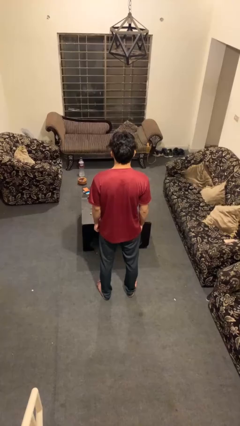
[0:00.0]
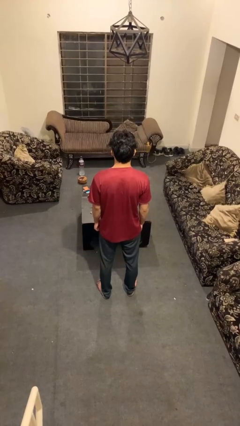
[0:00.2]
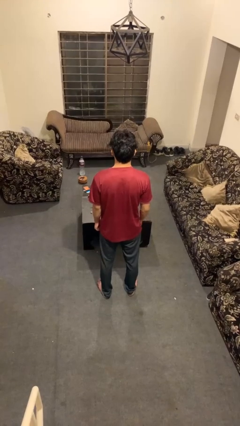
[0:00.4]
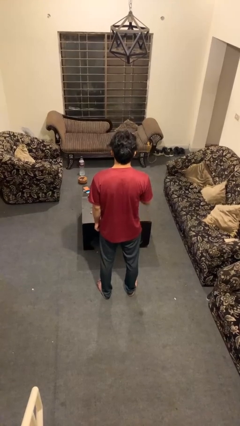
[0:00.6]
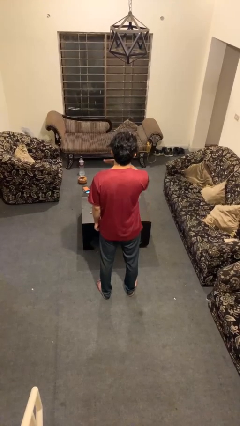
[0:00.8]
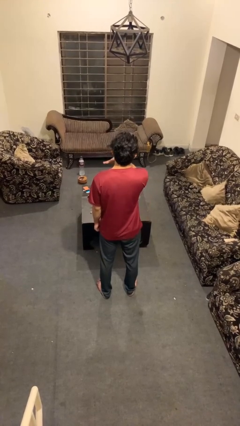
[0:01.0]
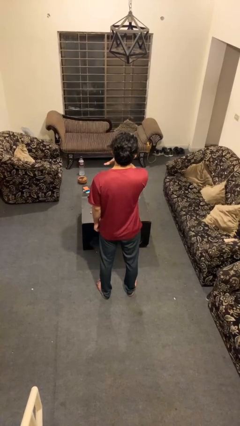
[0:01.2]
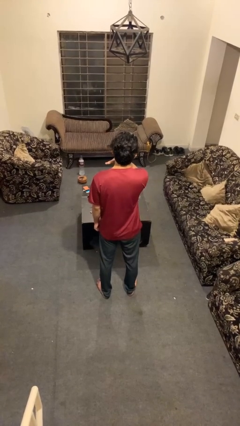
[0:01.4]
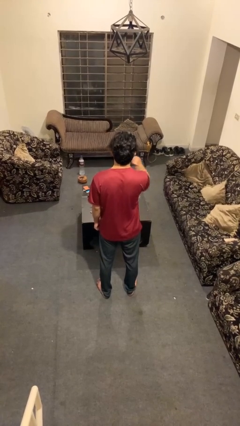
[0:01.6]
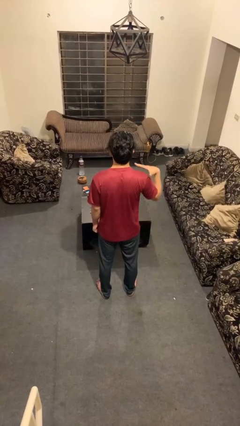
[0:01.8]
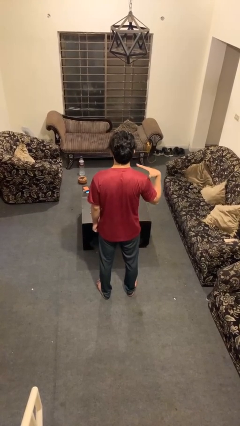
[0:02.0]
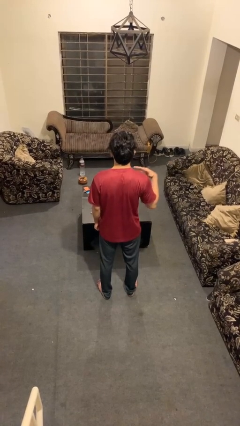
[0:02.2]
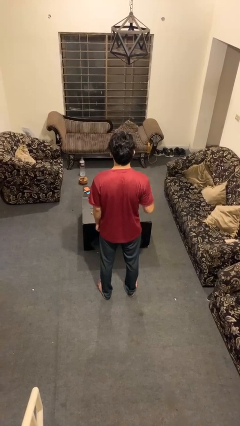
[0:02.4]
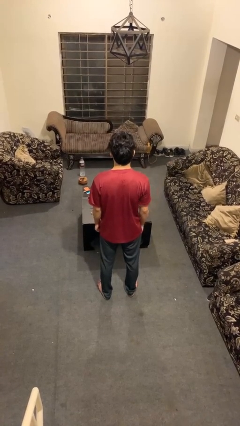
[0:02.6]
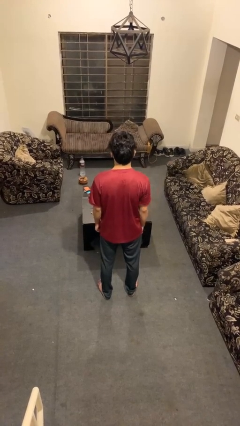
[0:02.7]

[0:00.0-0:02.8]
person gestures cut

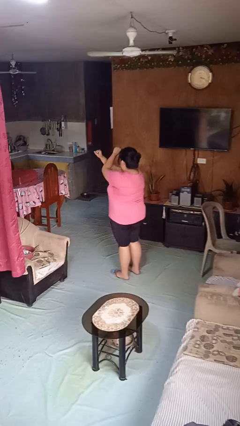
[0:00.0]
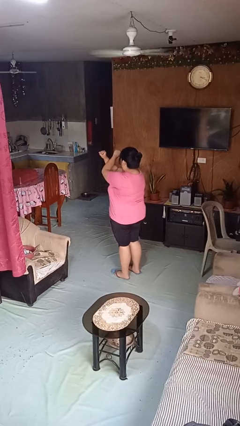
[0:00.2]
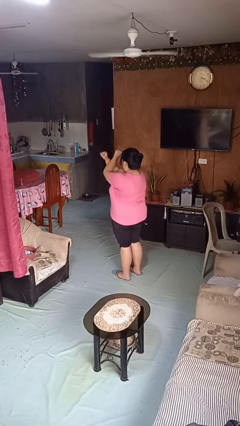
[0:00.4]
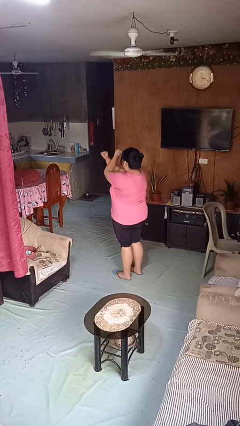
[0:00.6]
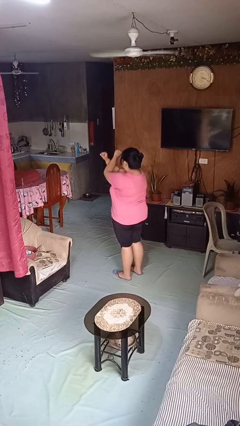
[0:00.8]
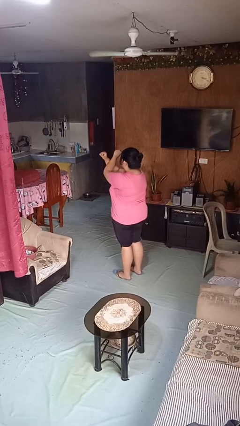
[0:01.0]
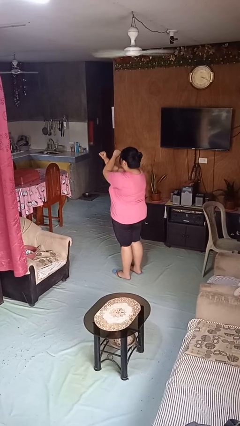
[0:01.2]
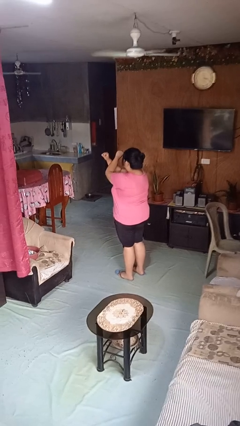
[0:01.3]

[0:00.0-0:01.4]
person gestures arms x

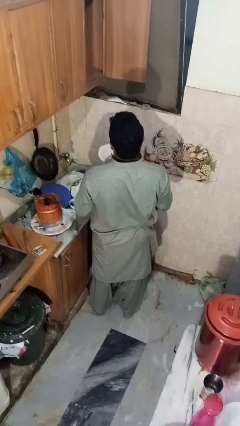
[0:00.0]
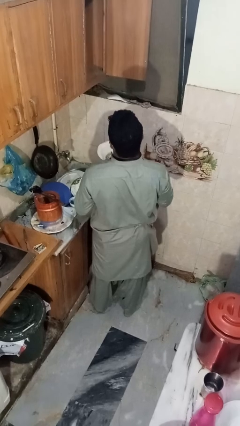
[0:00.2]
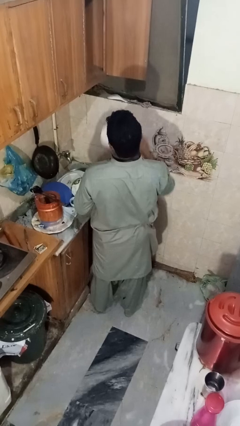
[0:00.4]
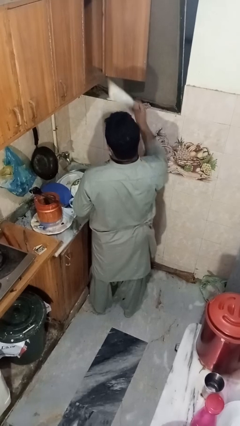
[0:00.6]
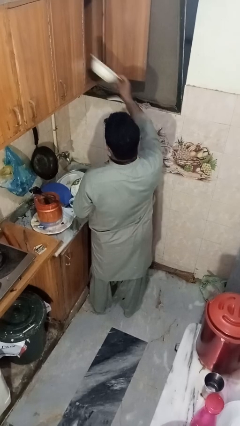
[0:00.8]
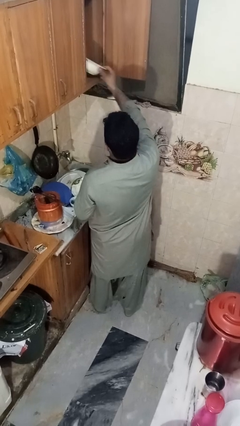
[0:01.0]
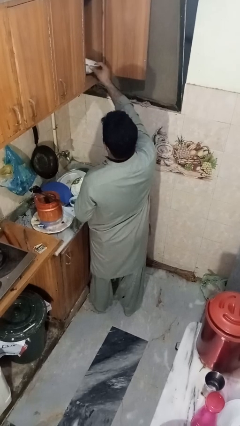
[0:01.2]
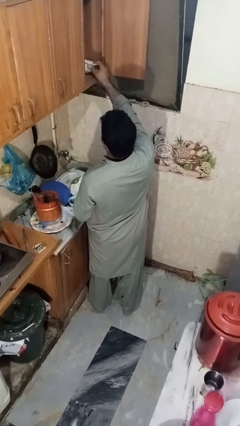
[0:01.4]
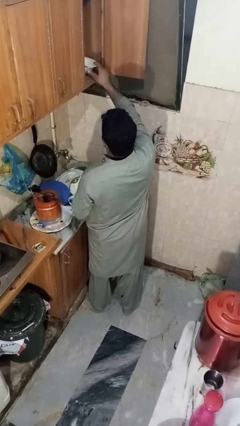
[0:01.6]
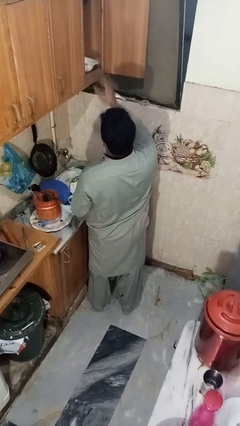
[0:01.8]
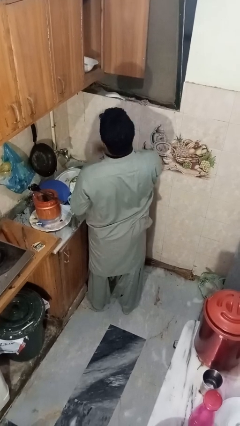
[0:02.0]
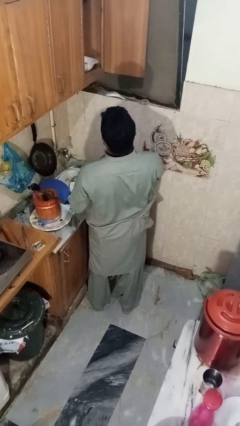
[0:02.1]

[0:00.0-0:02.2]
person puts object in cabinet

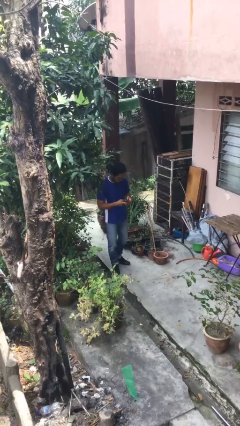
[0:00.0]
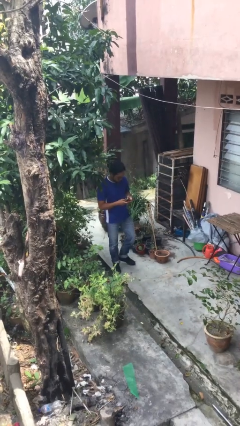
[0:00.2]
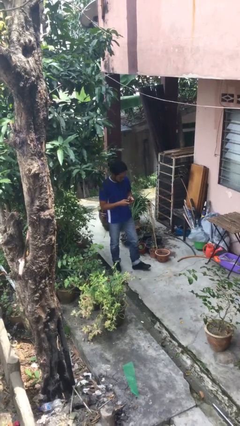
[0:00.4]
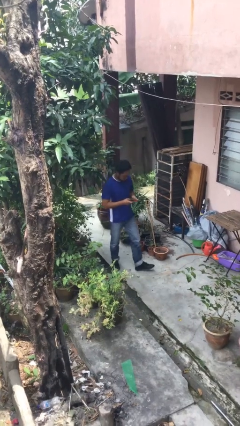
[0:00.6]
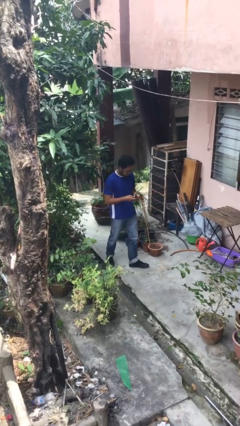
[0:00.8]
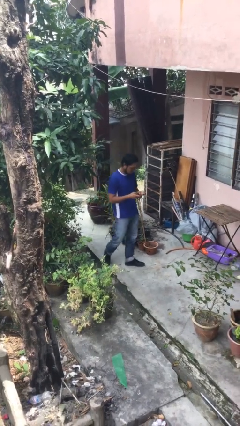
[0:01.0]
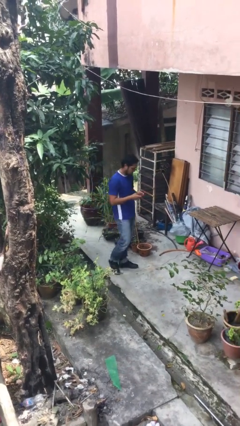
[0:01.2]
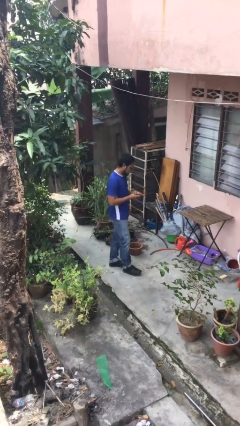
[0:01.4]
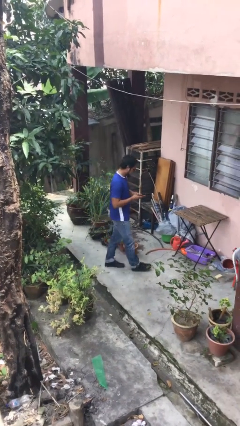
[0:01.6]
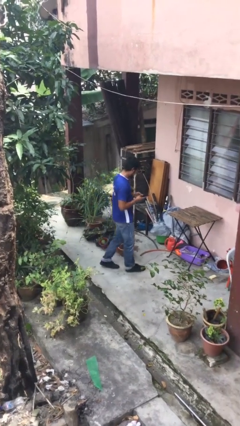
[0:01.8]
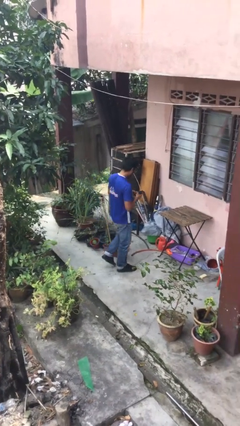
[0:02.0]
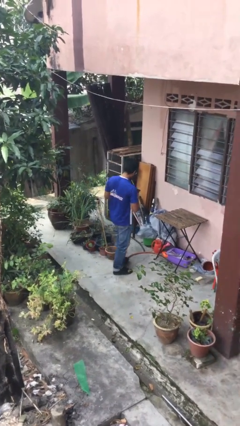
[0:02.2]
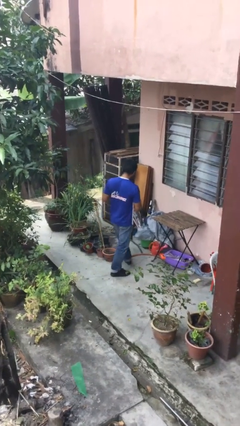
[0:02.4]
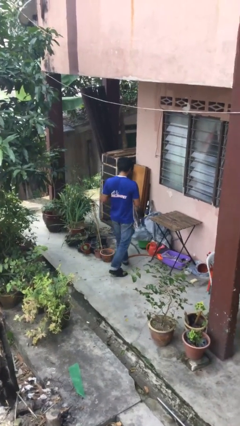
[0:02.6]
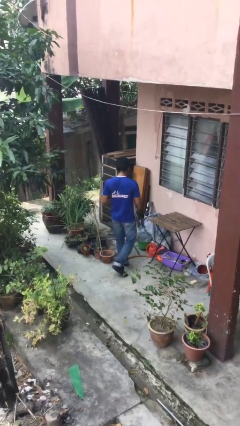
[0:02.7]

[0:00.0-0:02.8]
person texts on phone

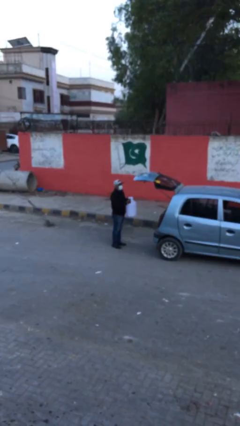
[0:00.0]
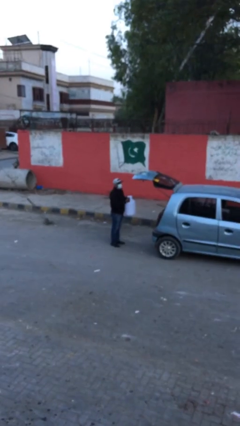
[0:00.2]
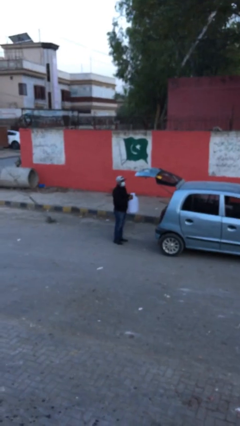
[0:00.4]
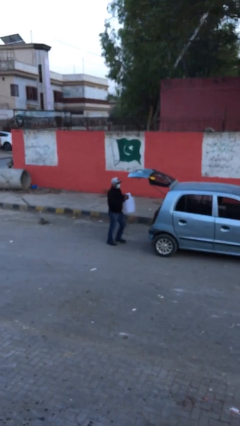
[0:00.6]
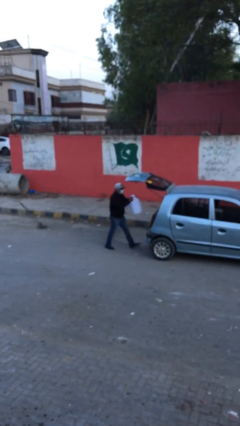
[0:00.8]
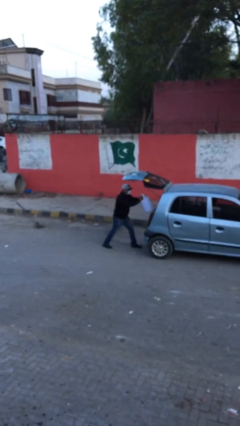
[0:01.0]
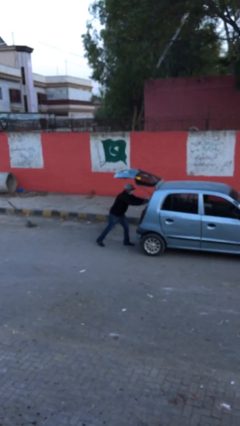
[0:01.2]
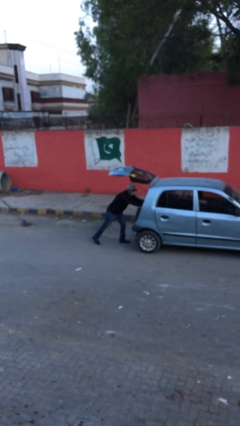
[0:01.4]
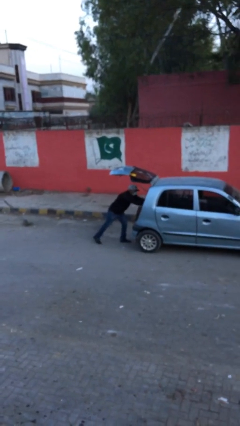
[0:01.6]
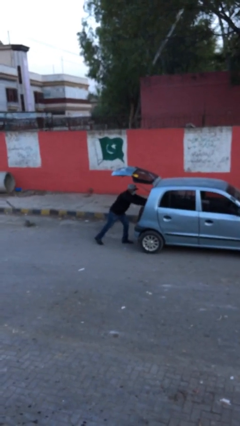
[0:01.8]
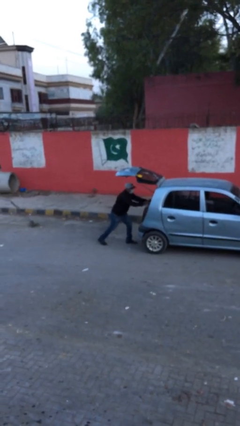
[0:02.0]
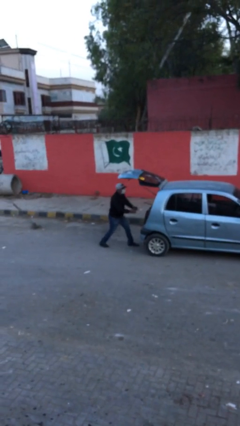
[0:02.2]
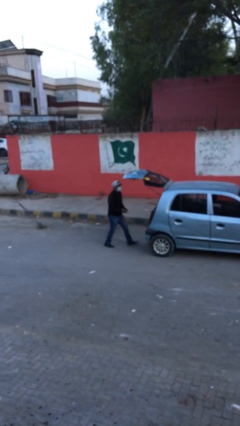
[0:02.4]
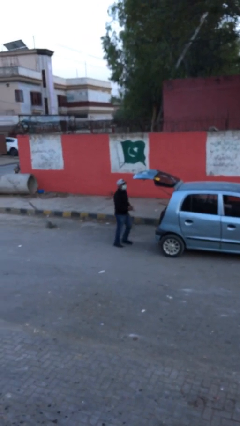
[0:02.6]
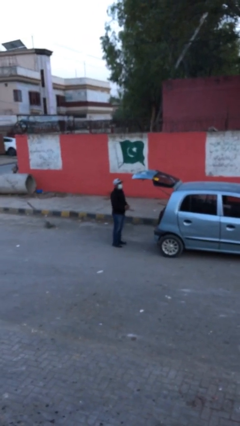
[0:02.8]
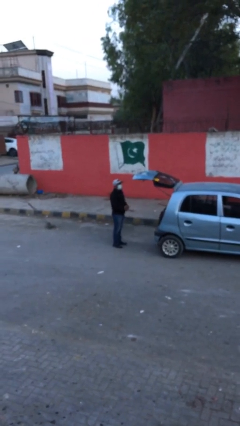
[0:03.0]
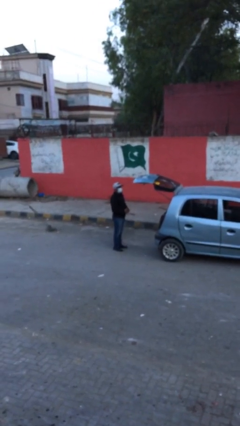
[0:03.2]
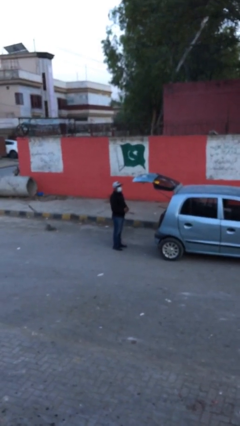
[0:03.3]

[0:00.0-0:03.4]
person loads car

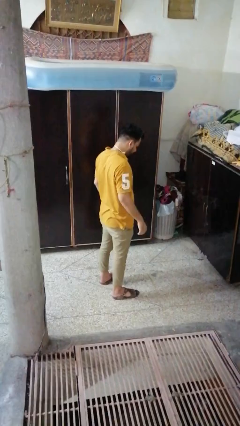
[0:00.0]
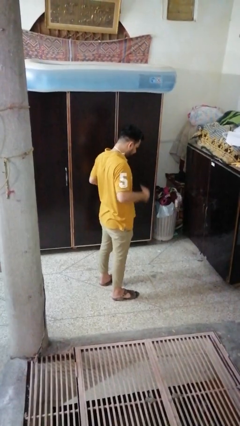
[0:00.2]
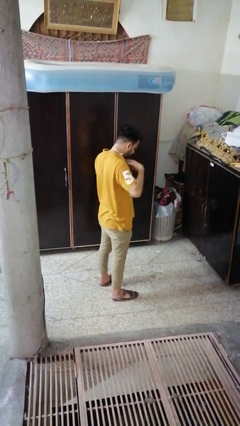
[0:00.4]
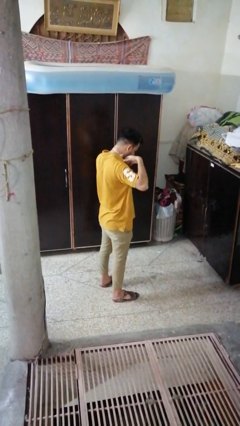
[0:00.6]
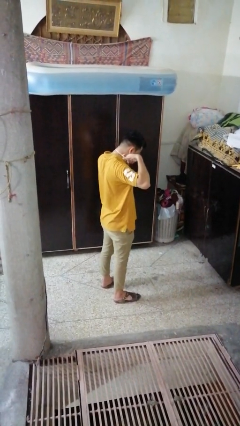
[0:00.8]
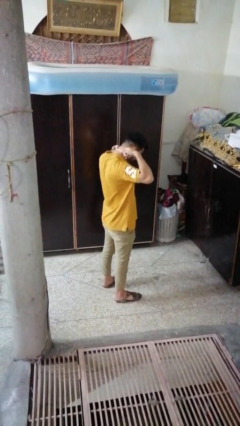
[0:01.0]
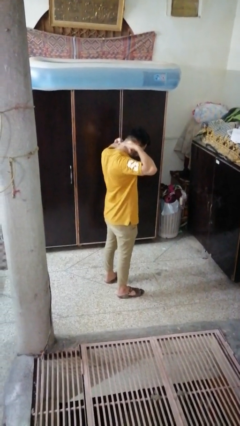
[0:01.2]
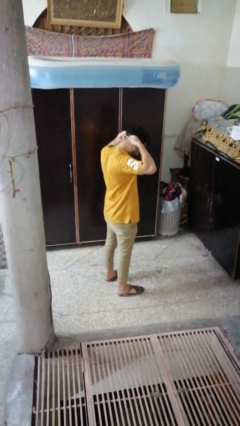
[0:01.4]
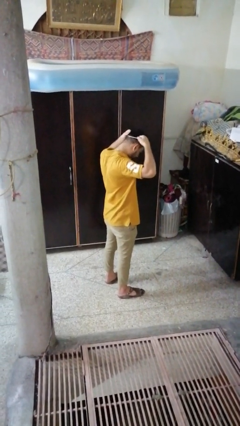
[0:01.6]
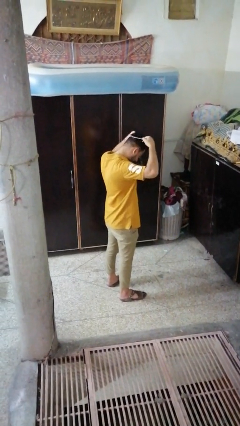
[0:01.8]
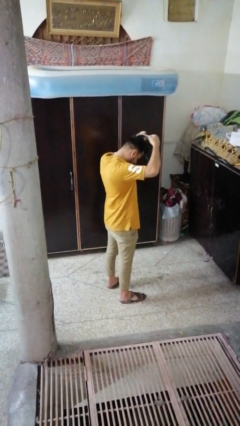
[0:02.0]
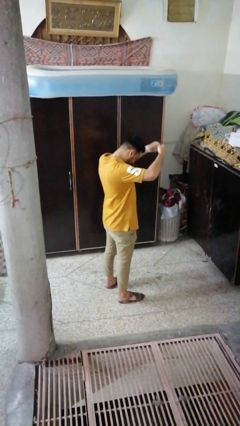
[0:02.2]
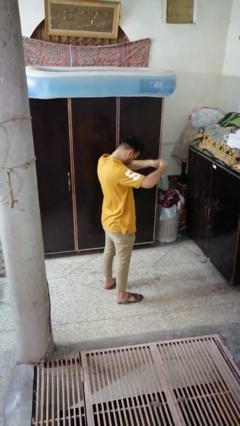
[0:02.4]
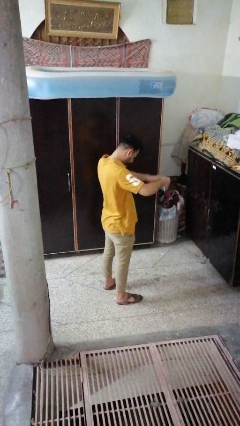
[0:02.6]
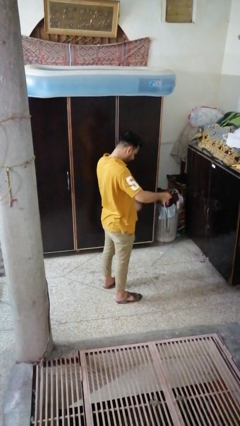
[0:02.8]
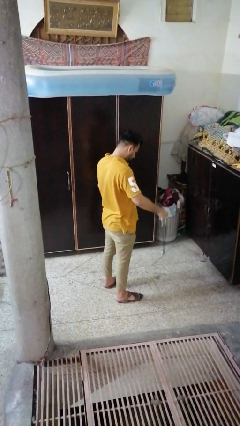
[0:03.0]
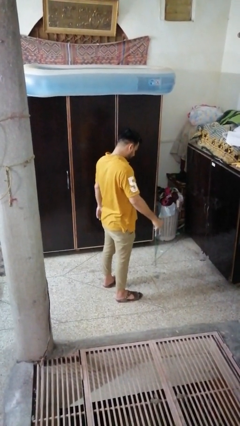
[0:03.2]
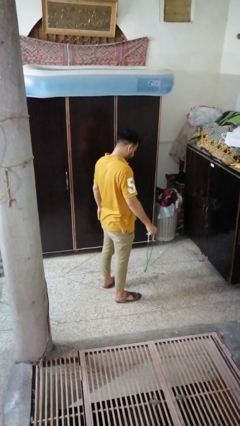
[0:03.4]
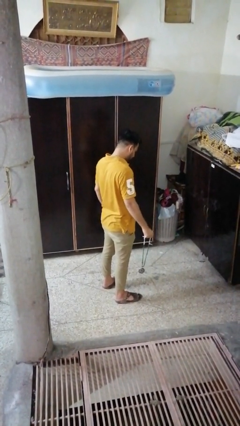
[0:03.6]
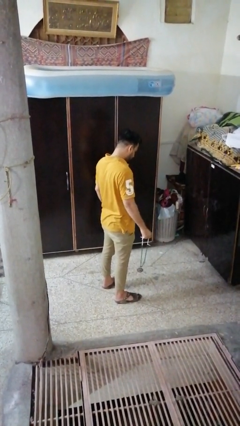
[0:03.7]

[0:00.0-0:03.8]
person takes off necklace

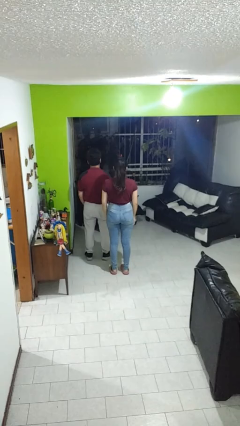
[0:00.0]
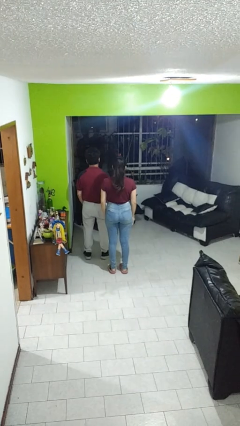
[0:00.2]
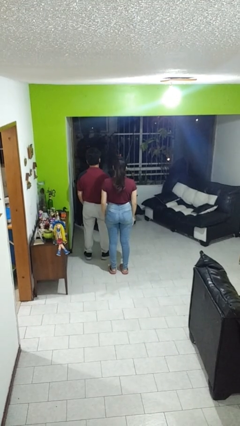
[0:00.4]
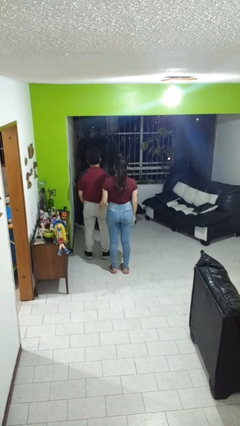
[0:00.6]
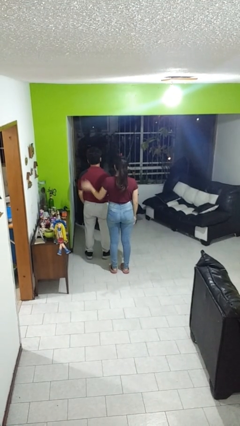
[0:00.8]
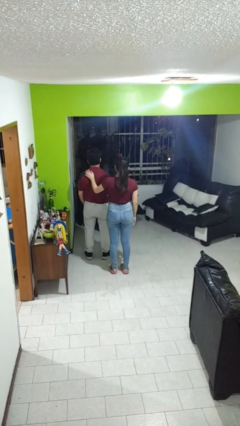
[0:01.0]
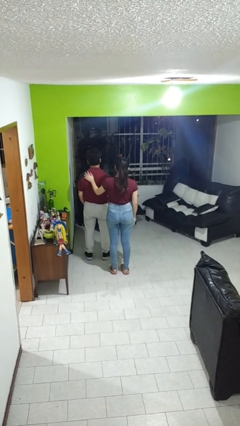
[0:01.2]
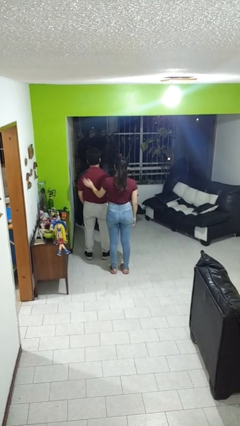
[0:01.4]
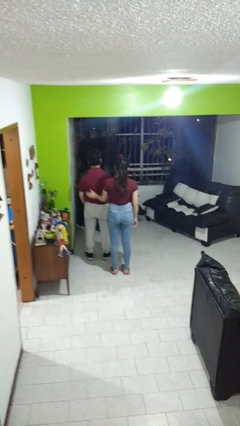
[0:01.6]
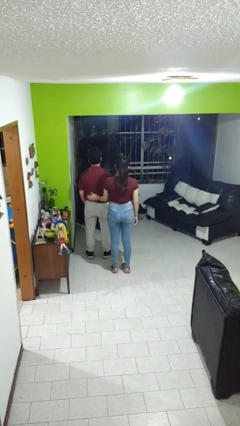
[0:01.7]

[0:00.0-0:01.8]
person touches back of person
